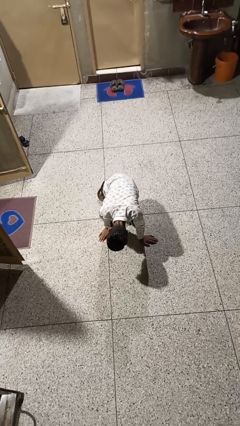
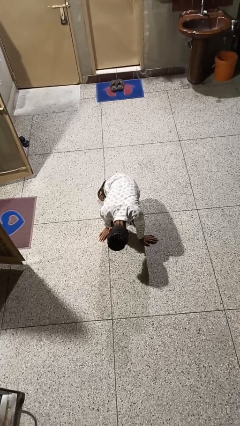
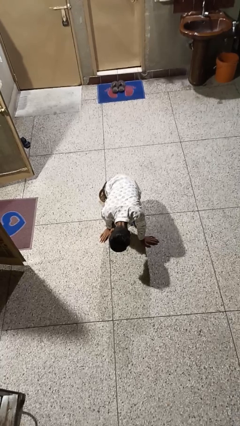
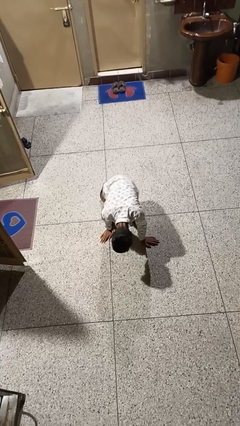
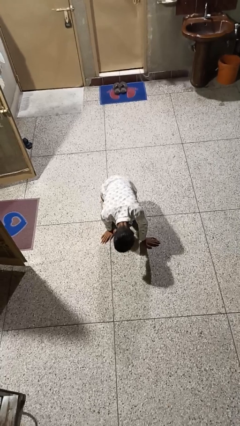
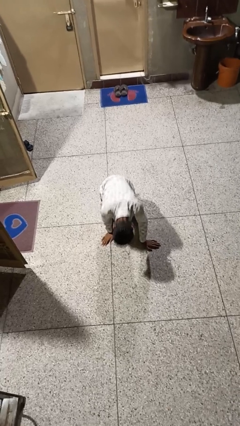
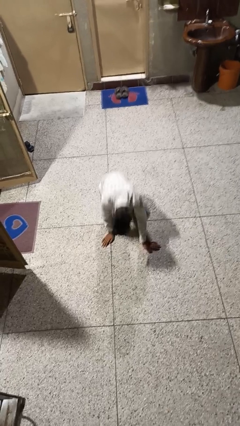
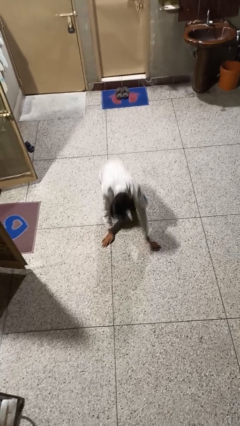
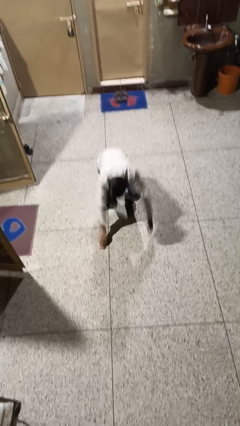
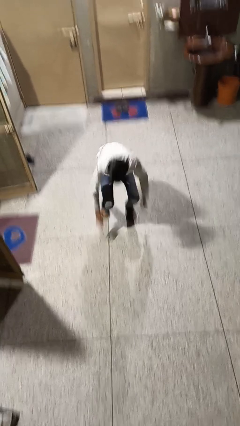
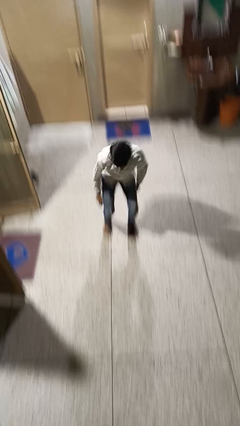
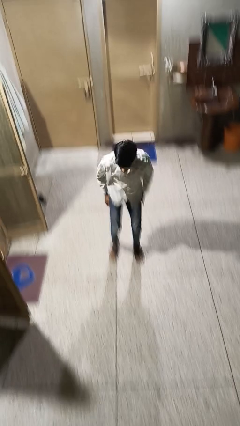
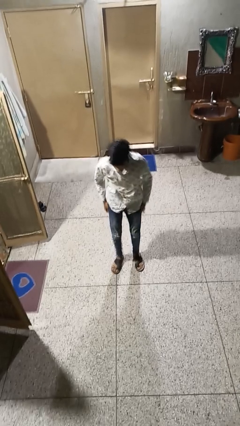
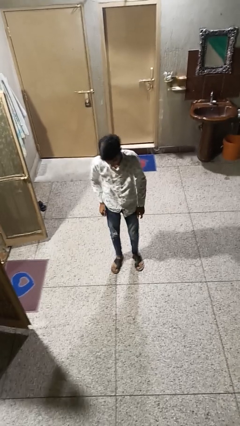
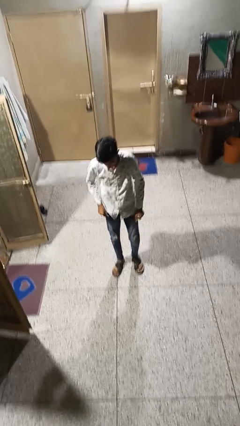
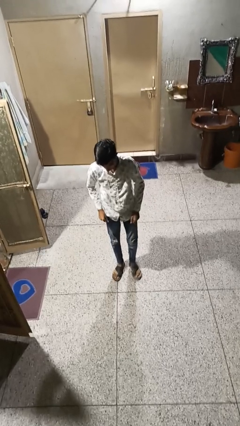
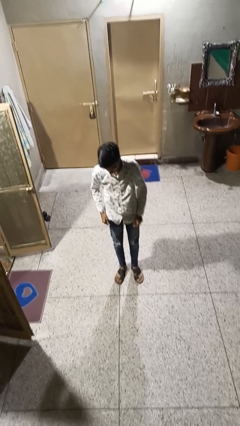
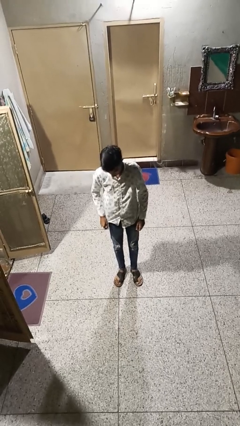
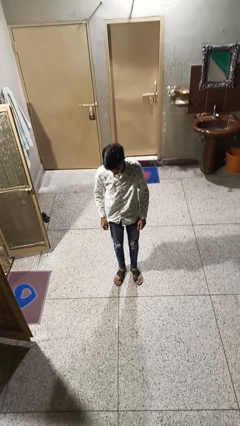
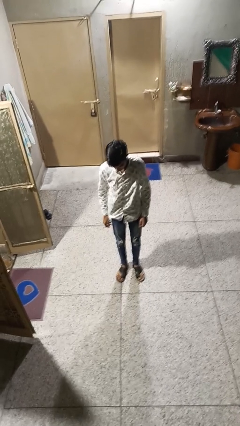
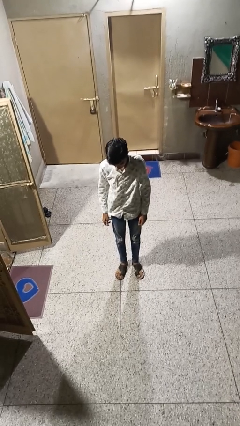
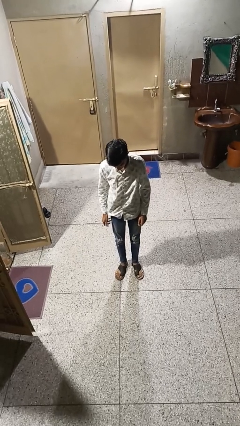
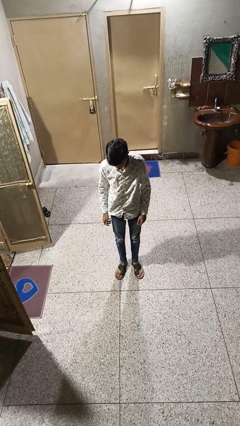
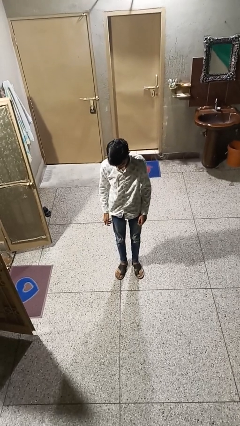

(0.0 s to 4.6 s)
person stands up from floor

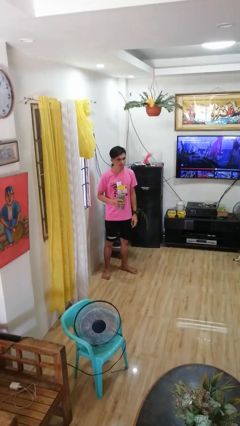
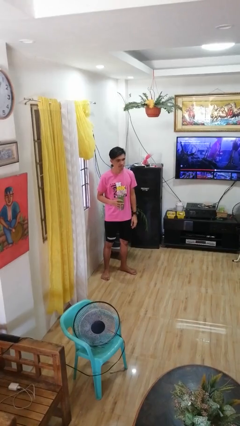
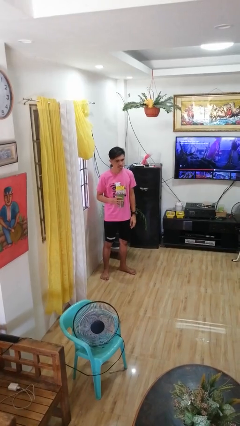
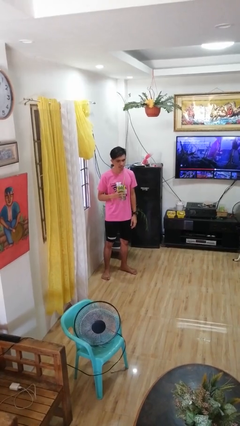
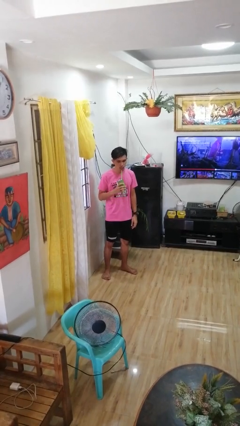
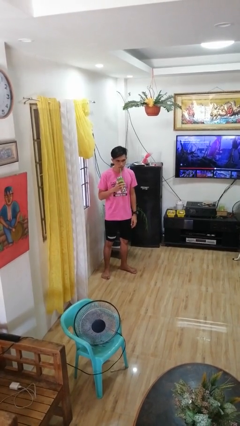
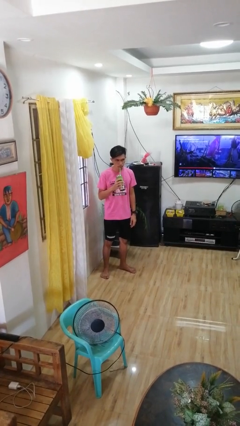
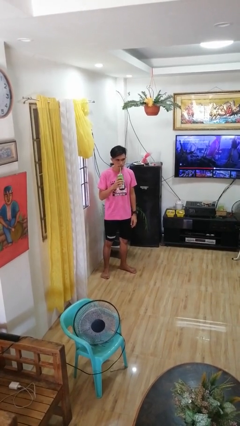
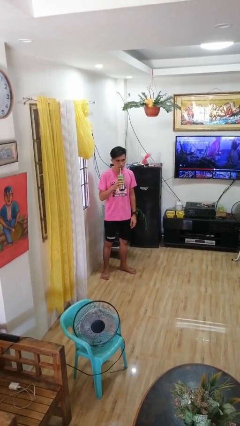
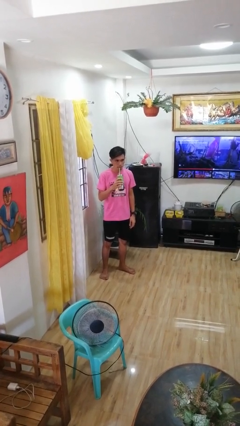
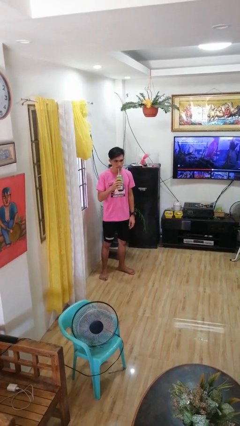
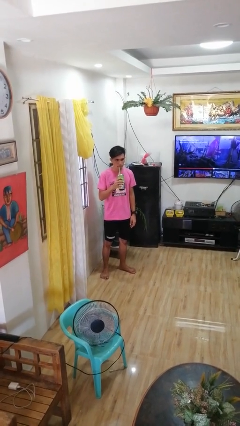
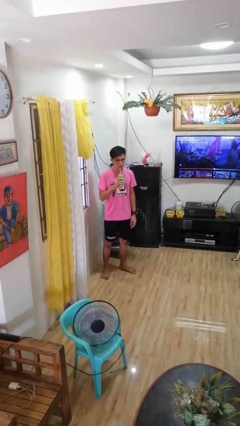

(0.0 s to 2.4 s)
person drinks from straw

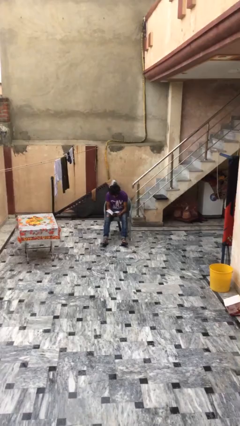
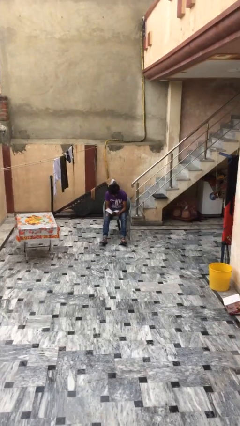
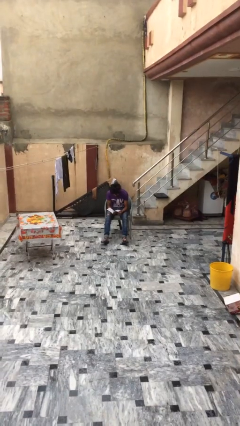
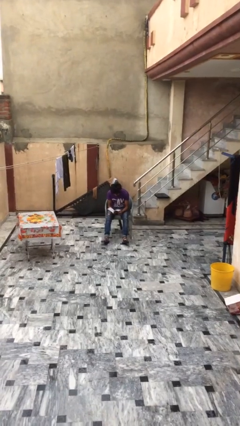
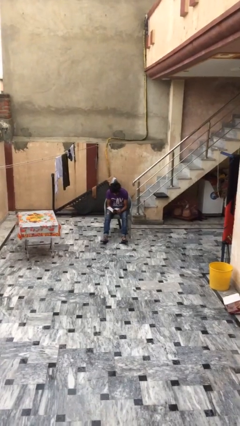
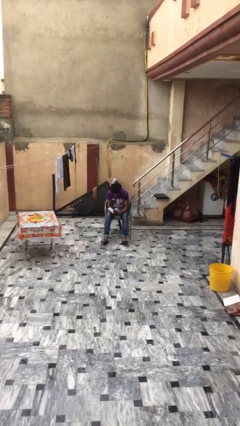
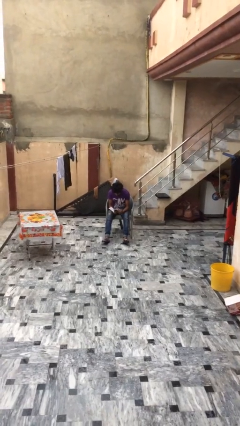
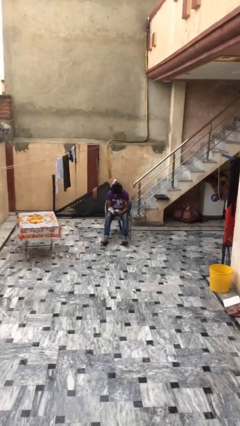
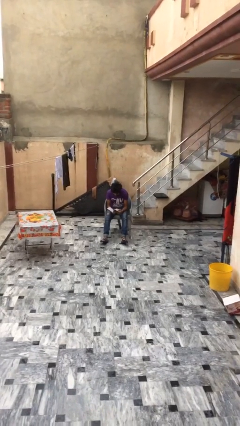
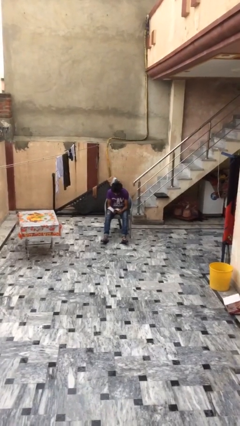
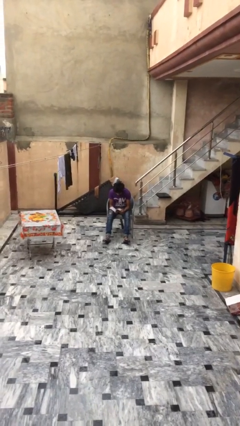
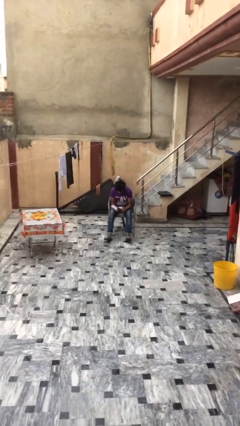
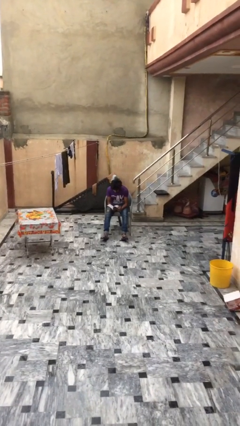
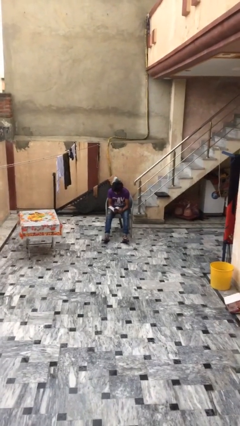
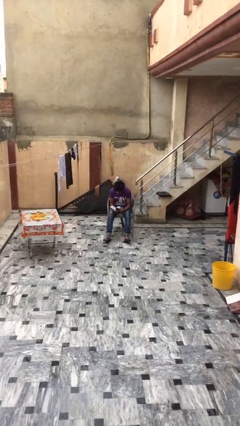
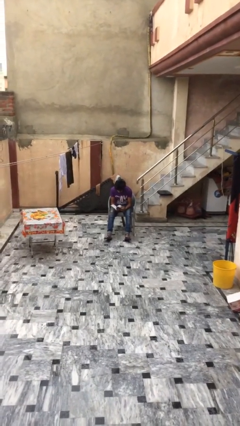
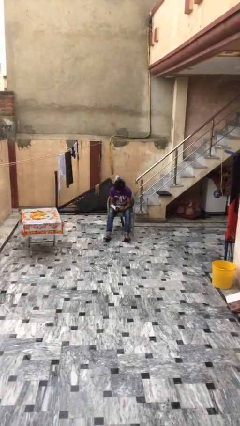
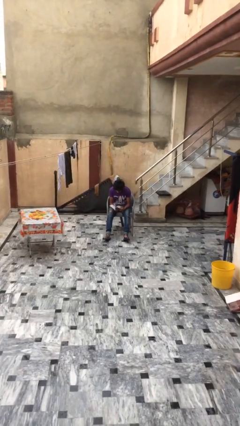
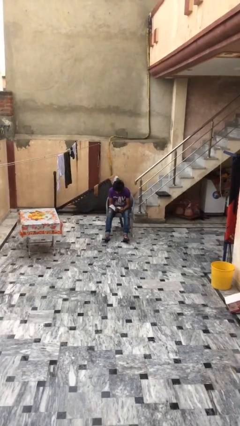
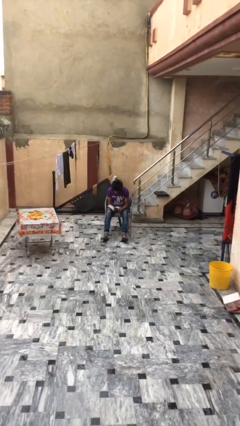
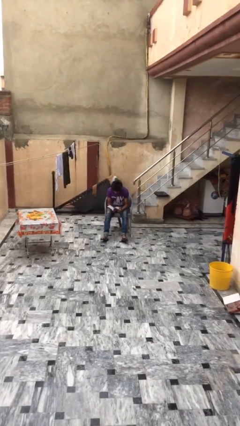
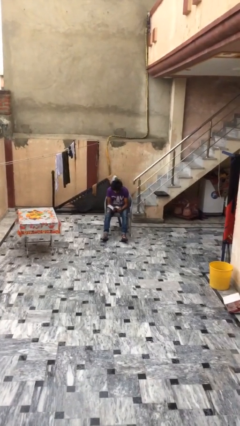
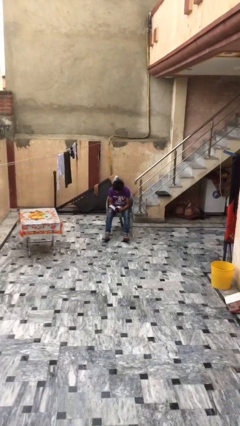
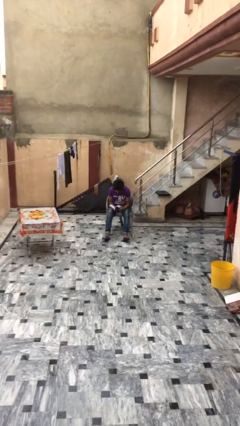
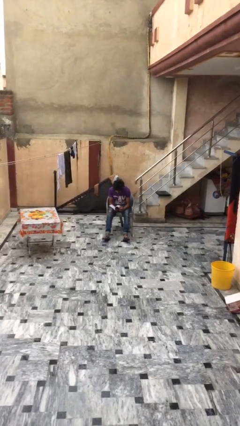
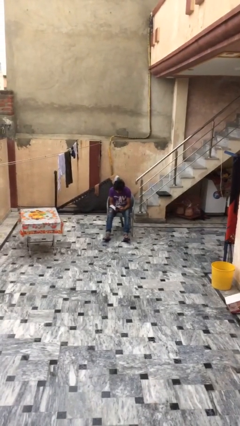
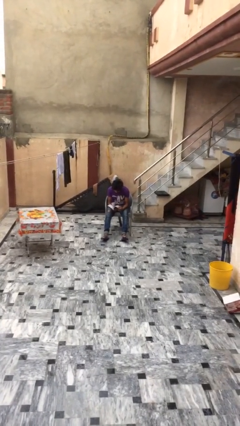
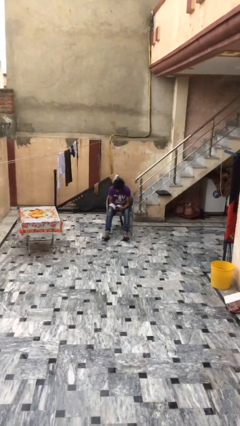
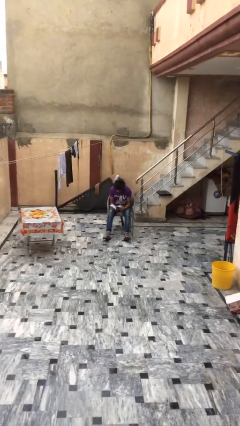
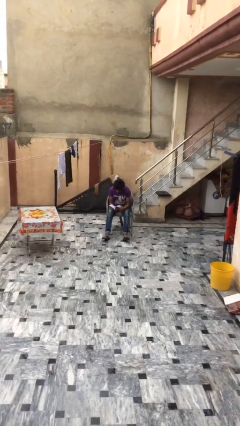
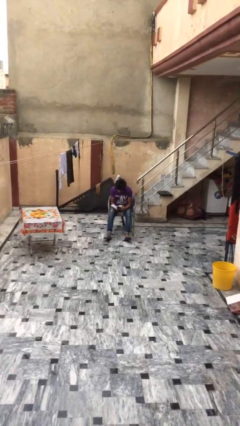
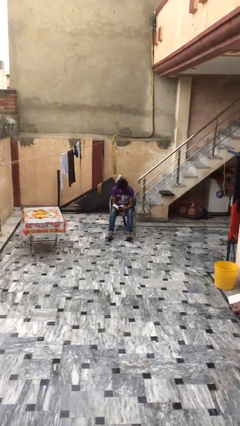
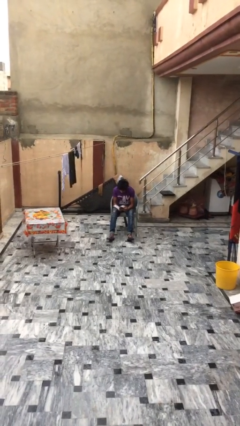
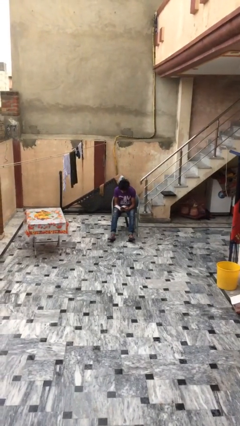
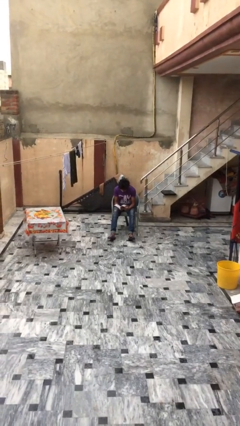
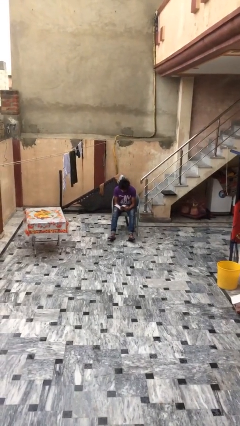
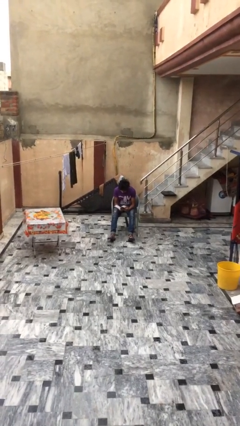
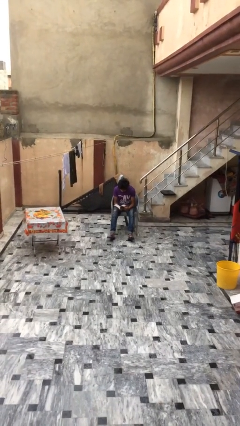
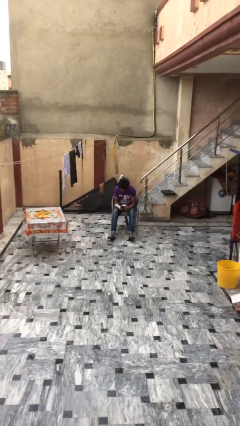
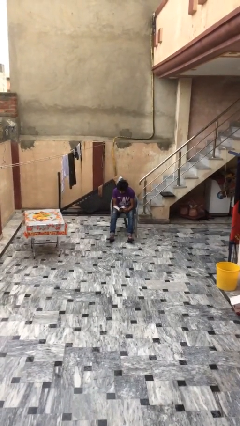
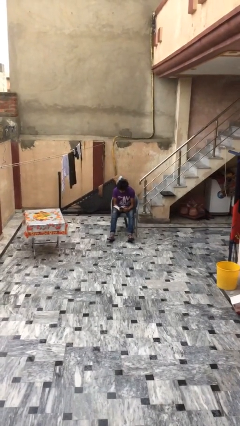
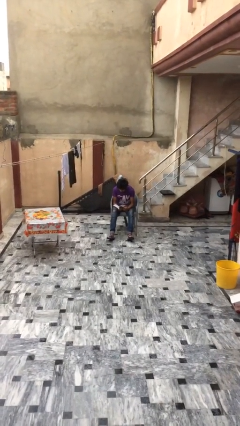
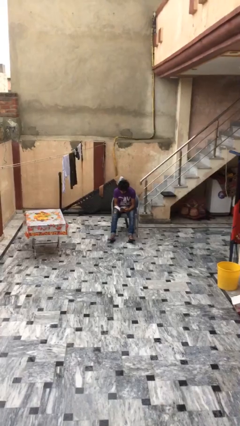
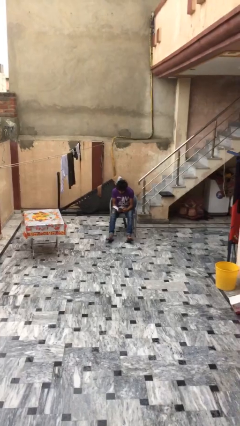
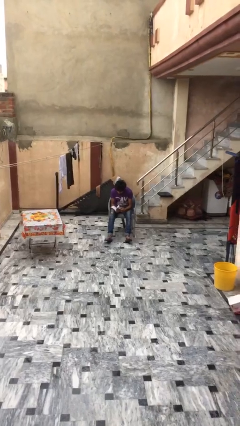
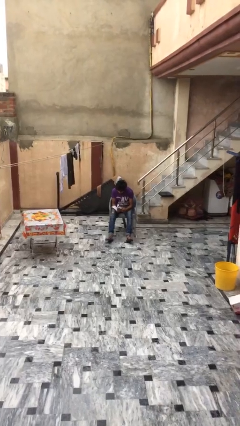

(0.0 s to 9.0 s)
person reads document

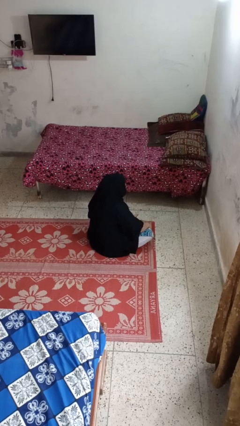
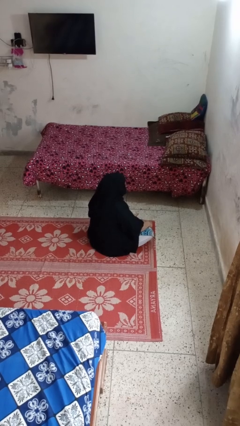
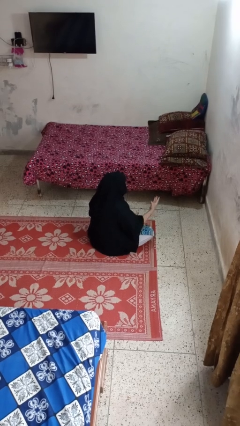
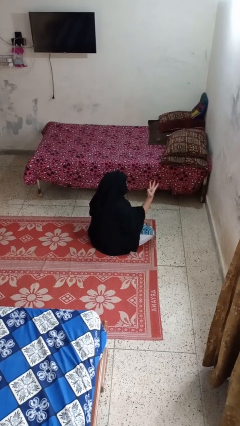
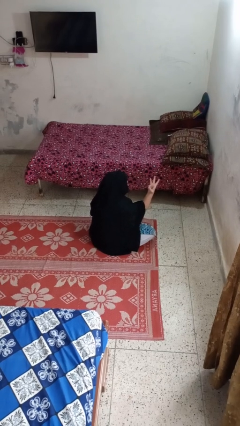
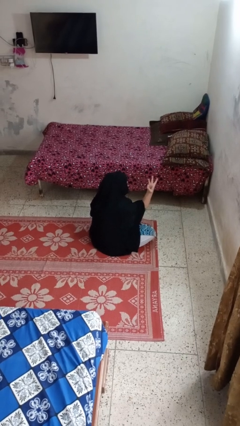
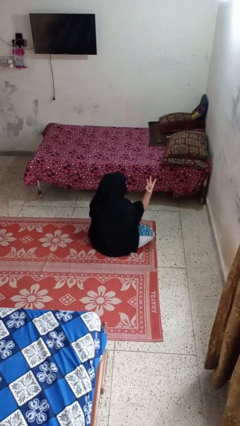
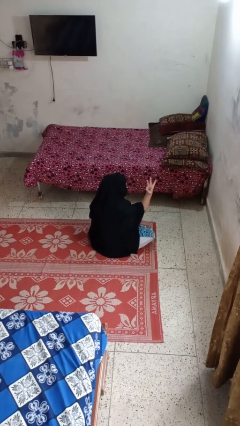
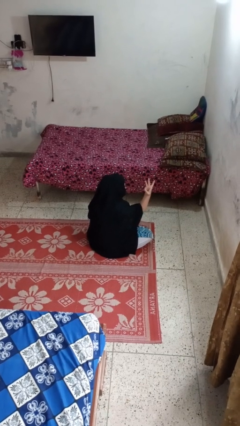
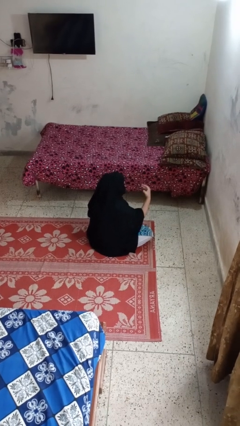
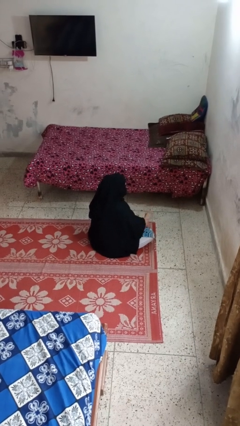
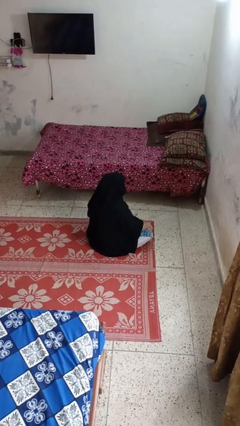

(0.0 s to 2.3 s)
person gestures number three
